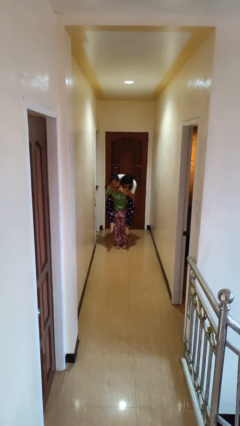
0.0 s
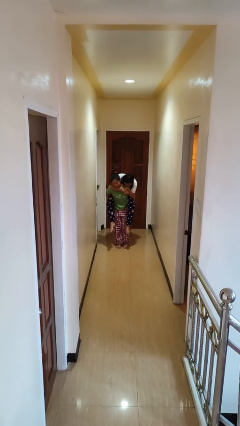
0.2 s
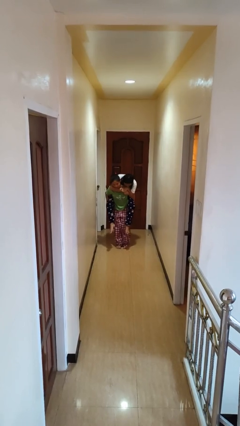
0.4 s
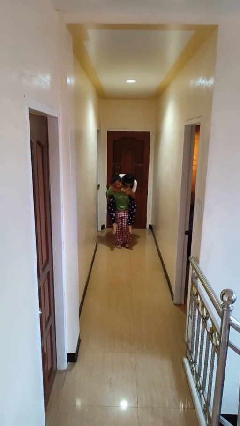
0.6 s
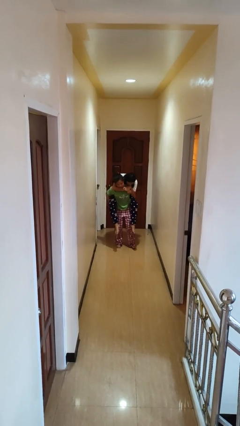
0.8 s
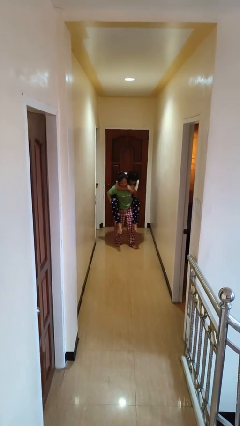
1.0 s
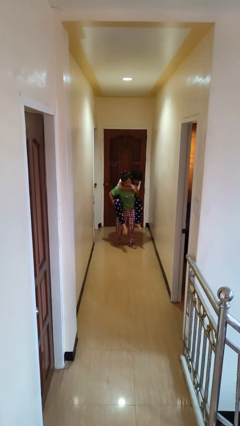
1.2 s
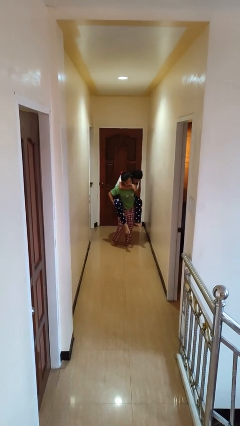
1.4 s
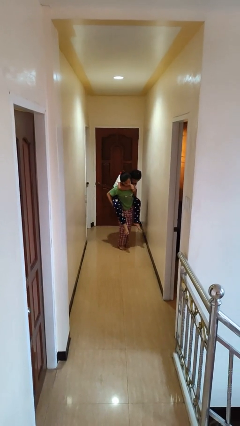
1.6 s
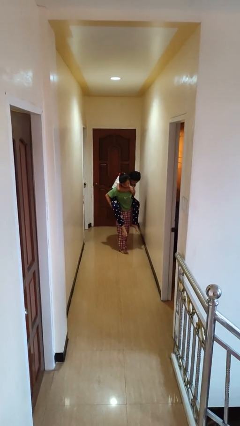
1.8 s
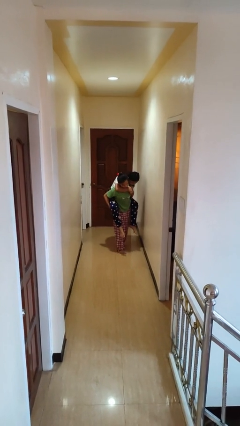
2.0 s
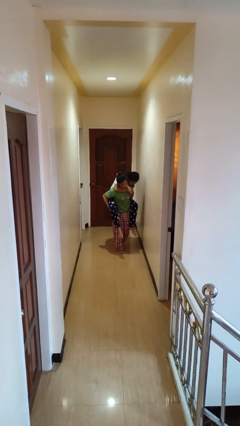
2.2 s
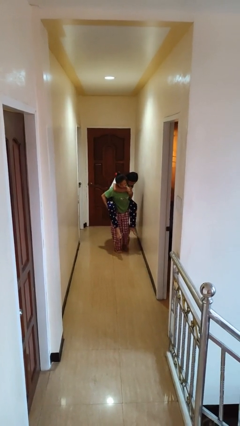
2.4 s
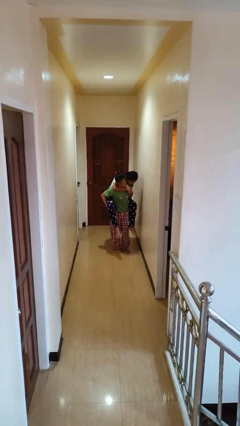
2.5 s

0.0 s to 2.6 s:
person carries person on back

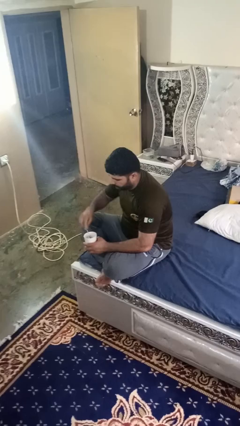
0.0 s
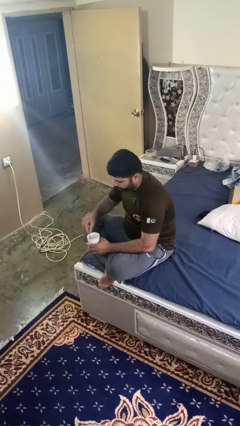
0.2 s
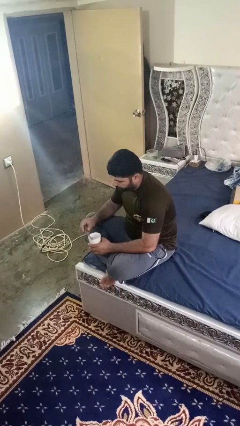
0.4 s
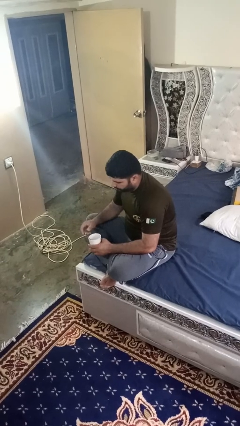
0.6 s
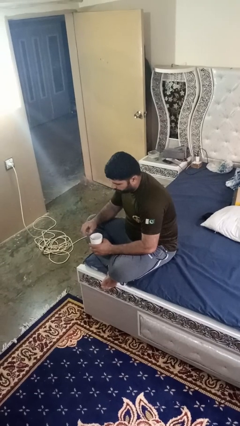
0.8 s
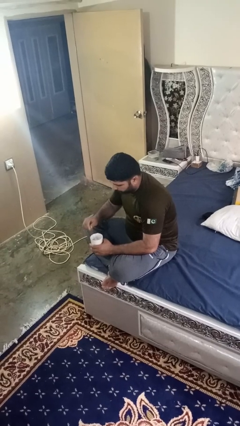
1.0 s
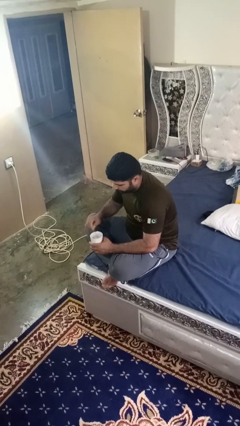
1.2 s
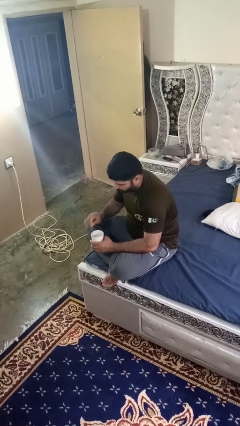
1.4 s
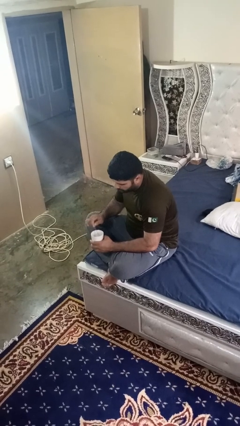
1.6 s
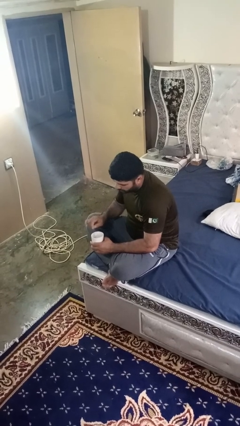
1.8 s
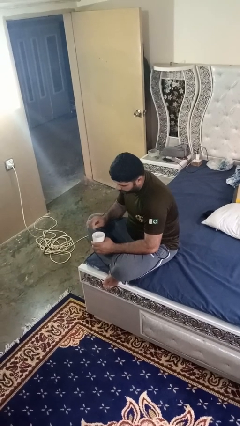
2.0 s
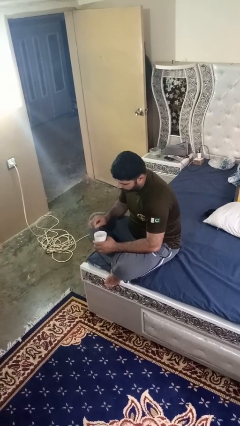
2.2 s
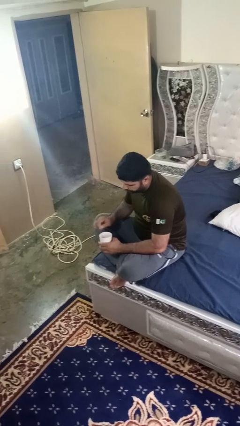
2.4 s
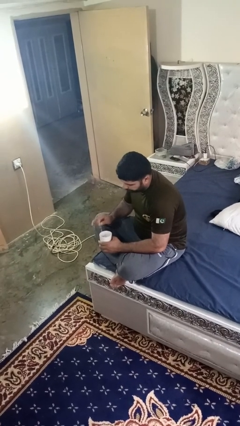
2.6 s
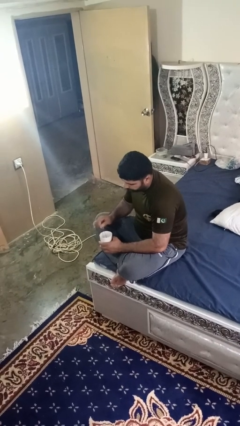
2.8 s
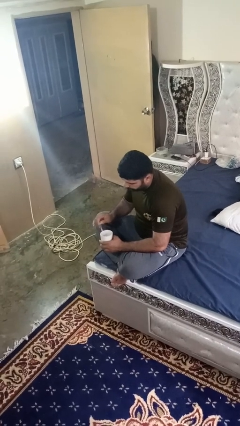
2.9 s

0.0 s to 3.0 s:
person stirs mug

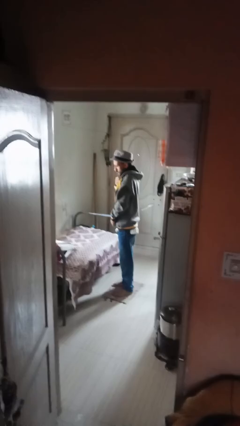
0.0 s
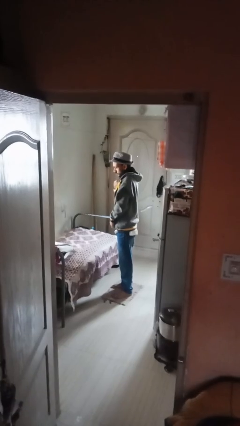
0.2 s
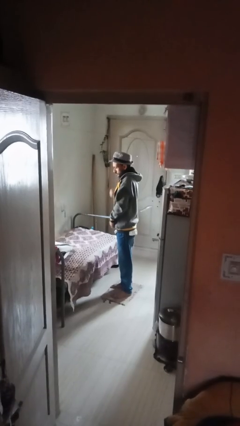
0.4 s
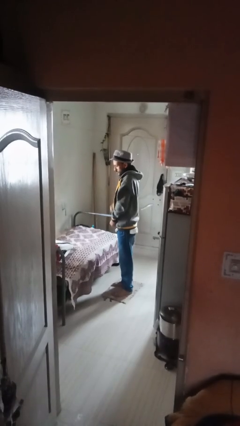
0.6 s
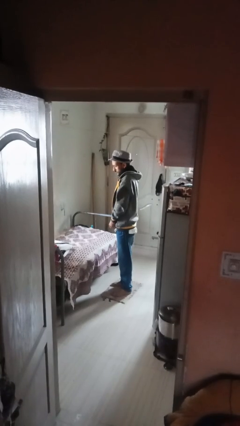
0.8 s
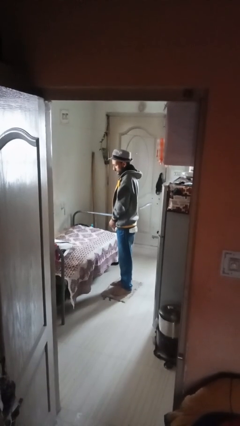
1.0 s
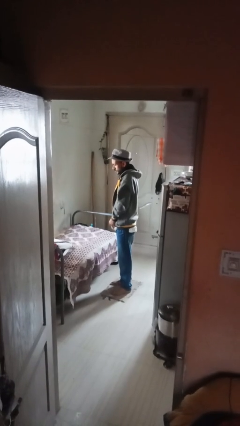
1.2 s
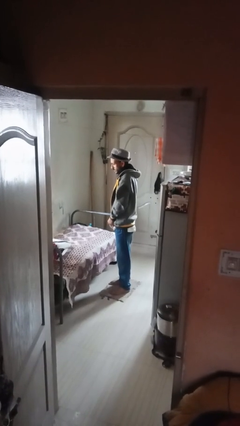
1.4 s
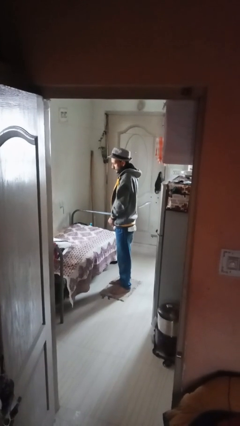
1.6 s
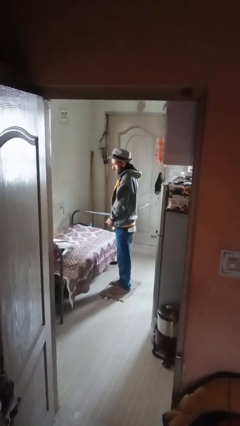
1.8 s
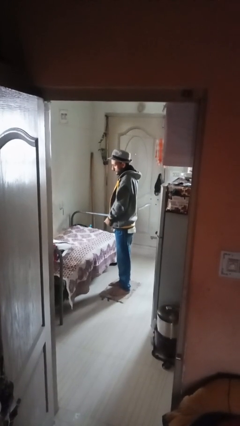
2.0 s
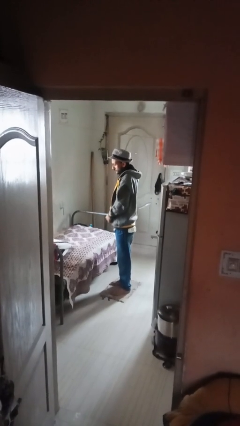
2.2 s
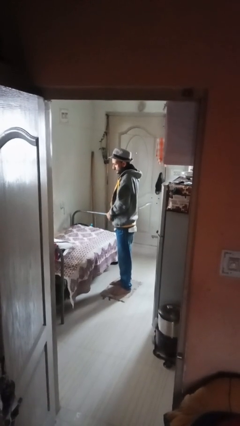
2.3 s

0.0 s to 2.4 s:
person unzips jacket

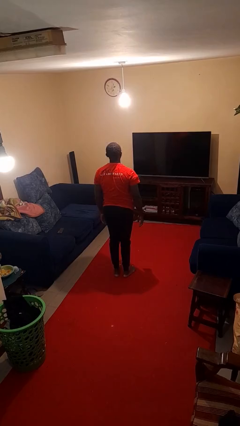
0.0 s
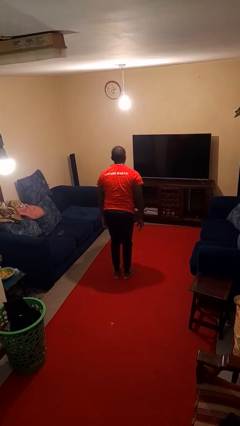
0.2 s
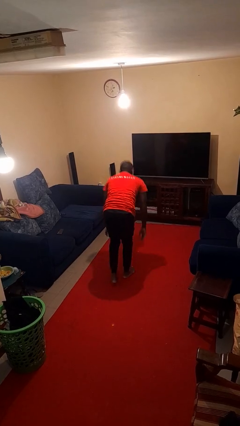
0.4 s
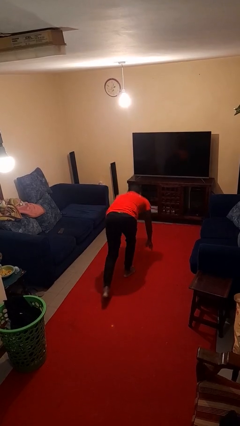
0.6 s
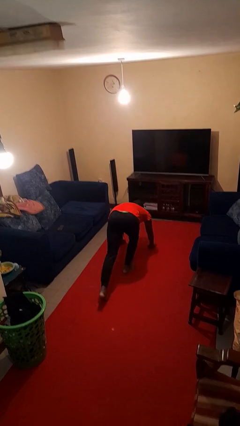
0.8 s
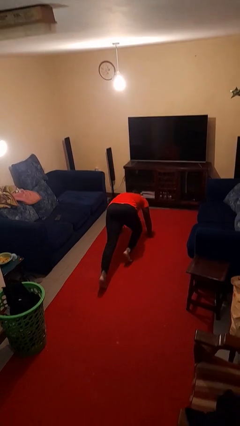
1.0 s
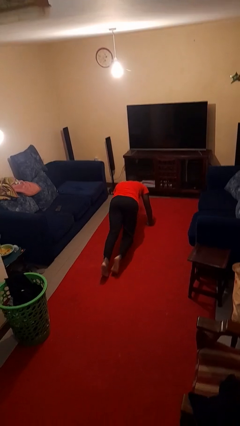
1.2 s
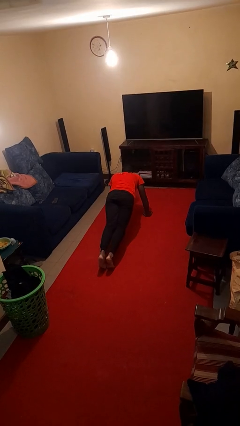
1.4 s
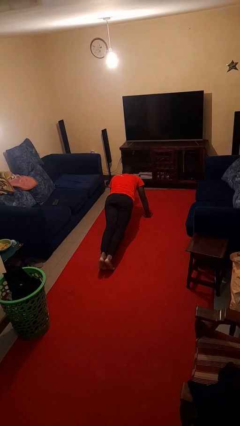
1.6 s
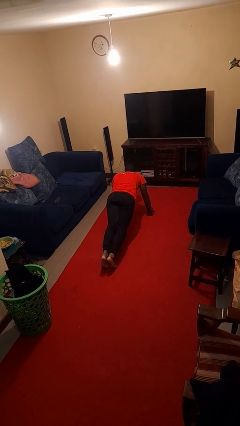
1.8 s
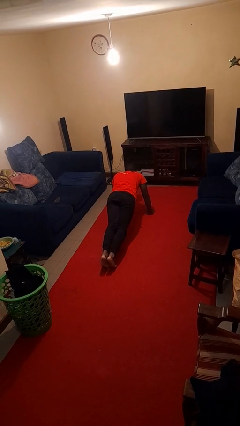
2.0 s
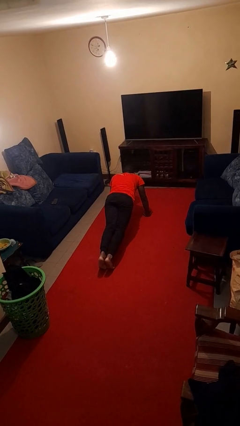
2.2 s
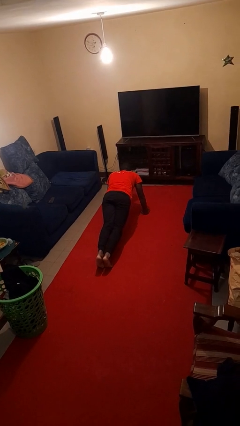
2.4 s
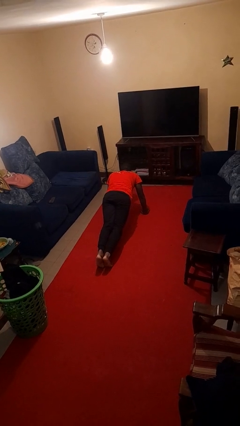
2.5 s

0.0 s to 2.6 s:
person exercises with plank

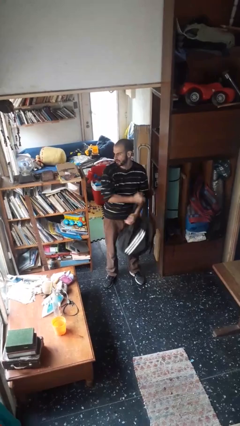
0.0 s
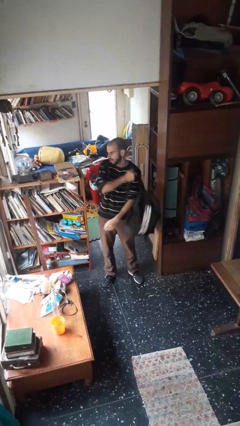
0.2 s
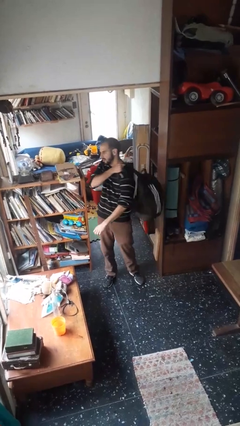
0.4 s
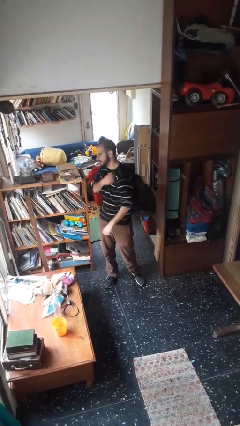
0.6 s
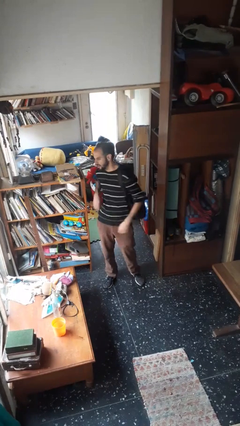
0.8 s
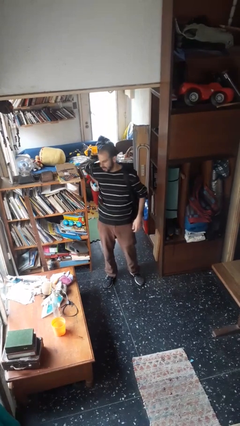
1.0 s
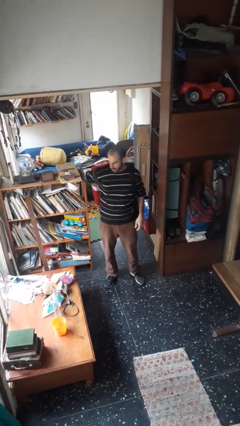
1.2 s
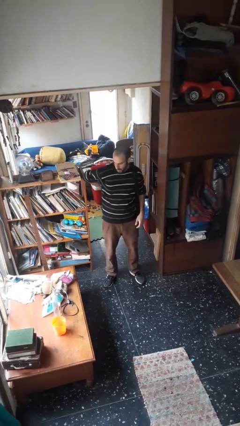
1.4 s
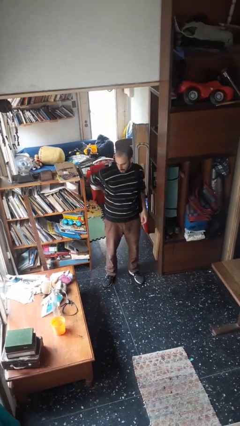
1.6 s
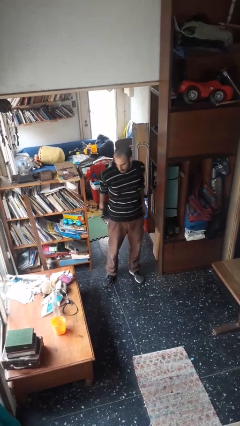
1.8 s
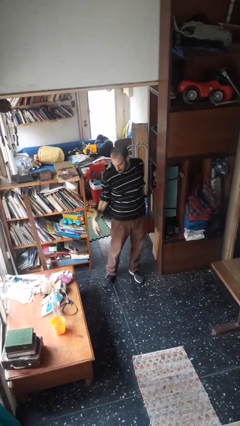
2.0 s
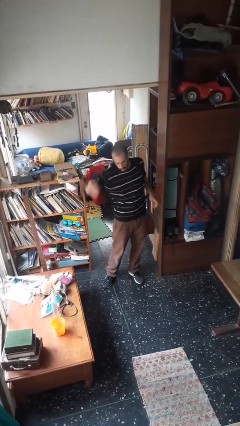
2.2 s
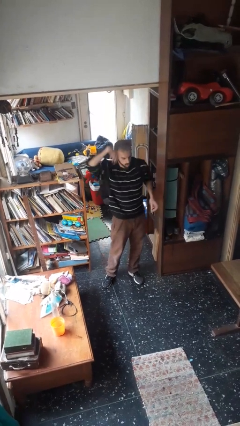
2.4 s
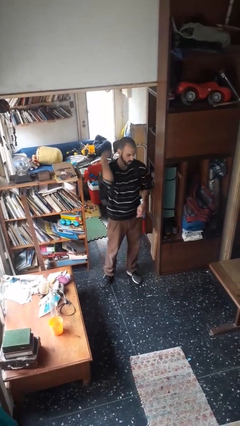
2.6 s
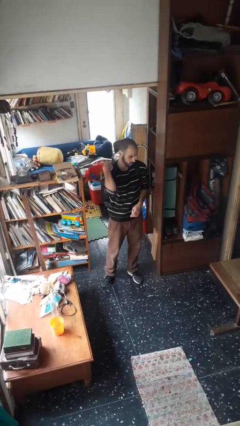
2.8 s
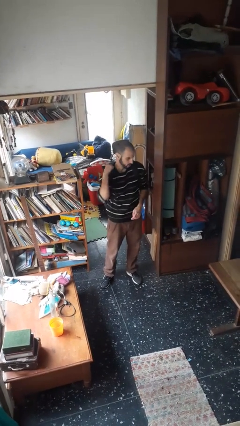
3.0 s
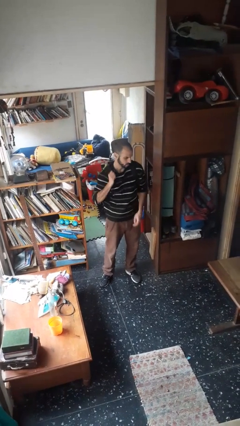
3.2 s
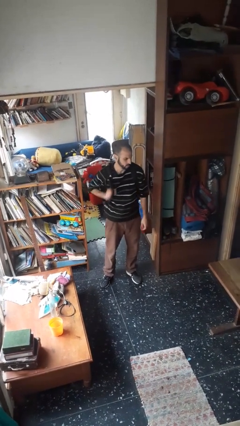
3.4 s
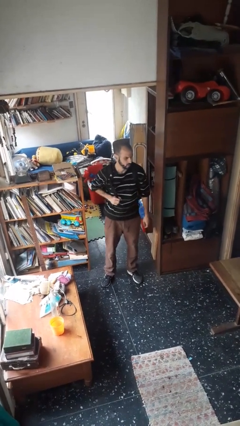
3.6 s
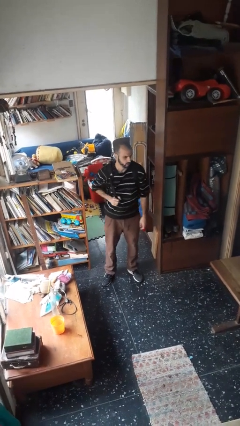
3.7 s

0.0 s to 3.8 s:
person puts on backpack

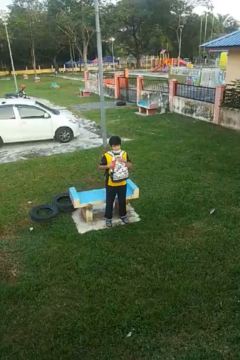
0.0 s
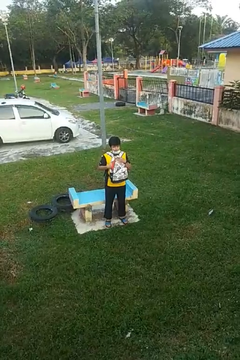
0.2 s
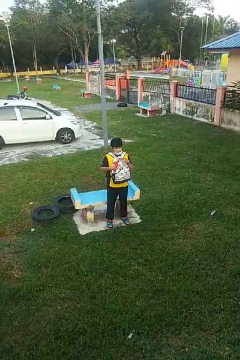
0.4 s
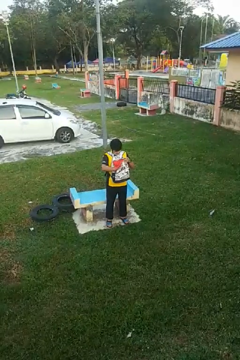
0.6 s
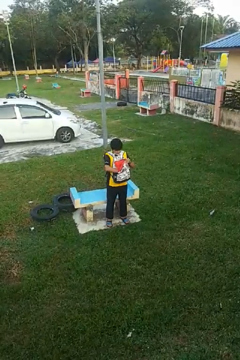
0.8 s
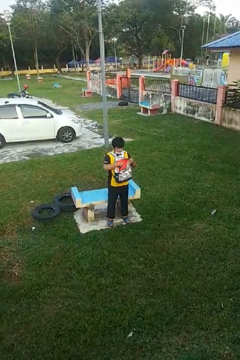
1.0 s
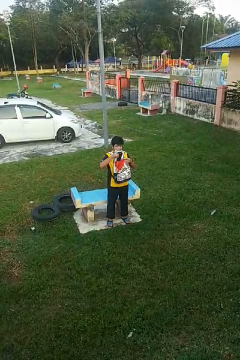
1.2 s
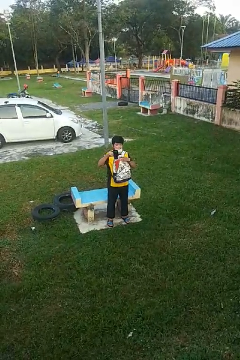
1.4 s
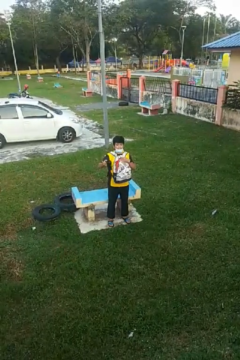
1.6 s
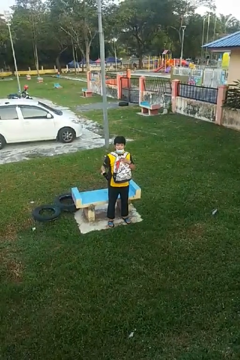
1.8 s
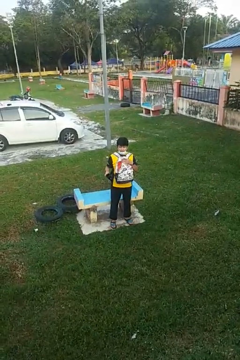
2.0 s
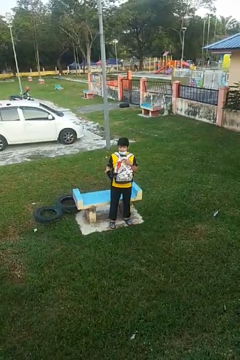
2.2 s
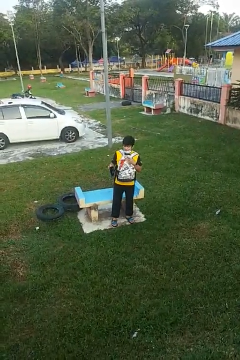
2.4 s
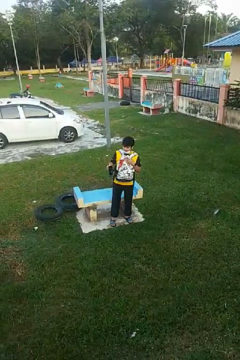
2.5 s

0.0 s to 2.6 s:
person takes off facemask

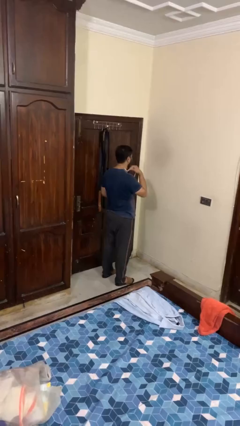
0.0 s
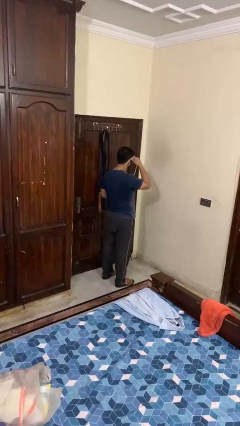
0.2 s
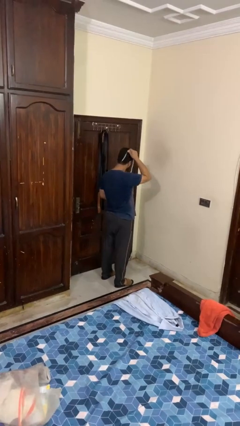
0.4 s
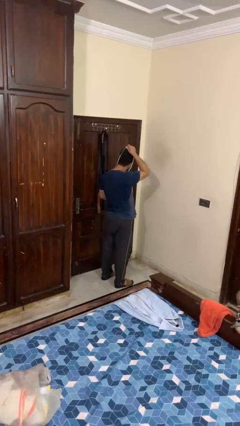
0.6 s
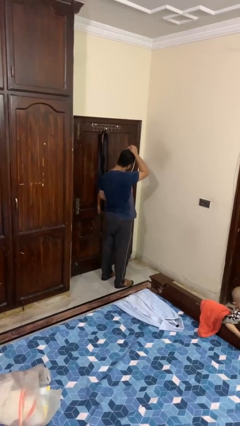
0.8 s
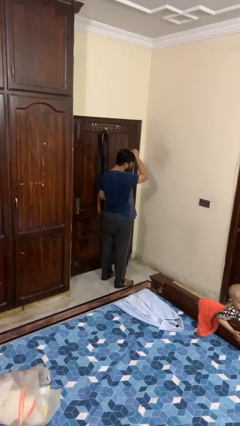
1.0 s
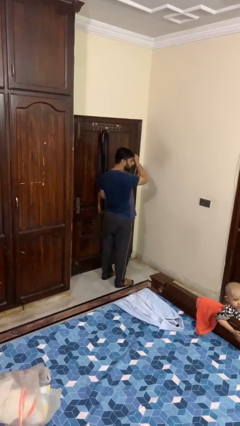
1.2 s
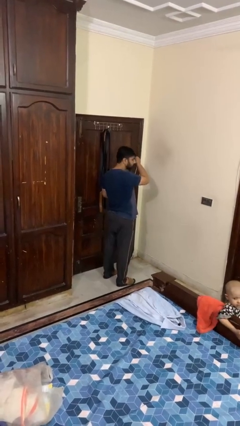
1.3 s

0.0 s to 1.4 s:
person takes off necklace
